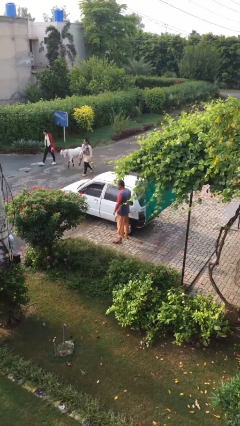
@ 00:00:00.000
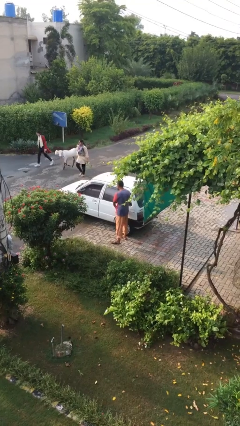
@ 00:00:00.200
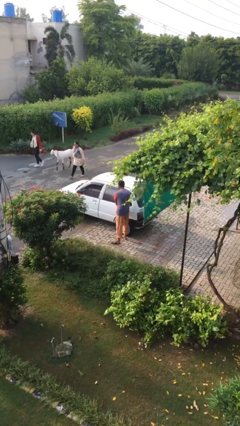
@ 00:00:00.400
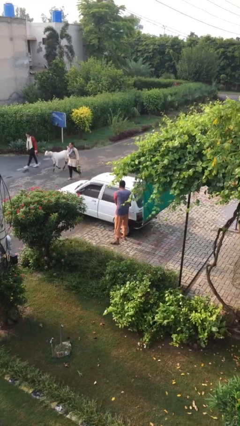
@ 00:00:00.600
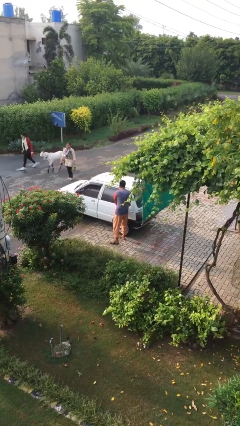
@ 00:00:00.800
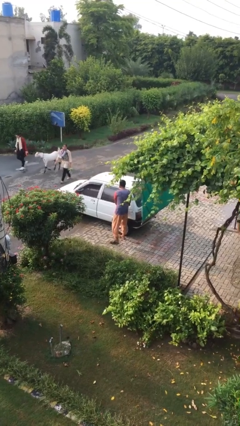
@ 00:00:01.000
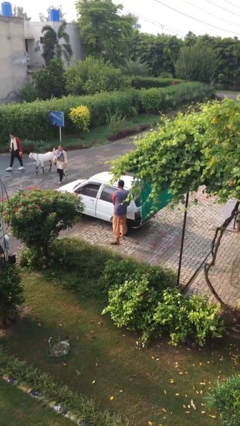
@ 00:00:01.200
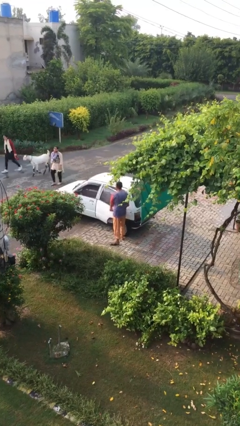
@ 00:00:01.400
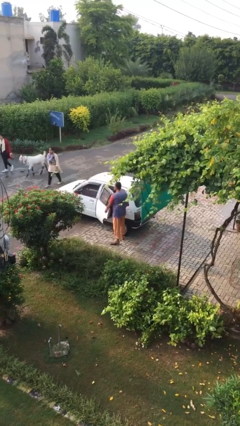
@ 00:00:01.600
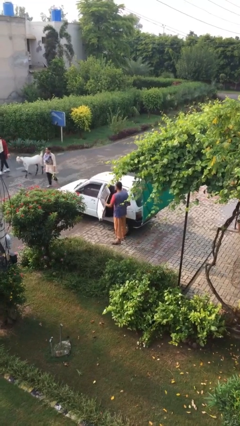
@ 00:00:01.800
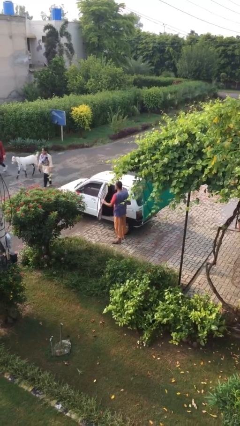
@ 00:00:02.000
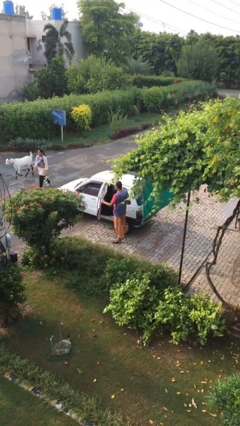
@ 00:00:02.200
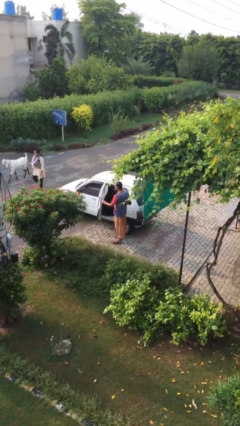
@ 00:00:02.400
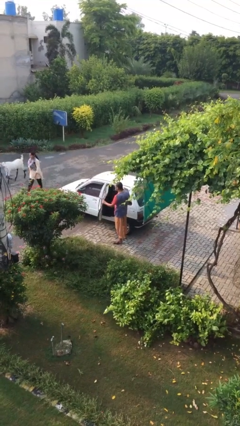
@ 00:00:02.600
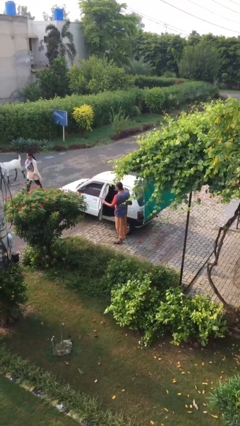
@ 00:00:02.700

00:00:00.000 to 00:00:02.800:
person opens car door

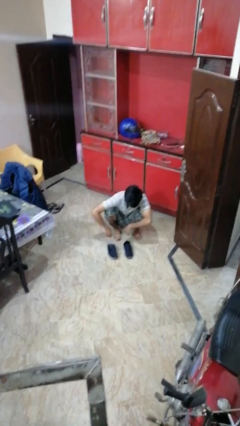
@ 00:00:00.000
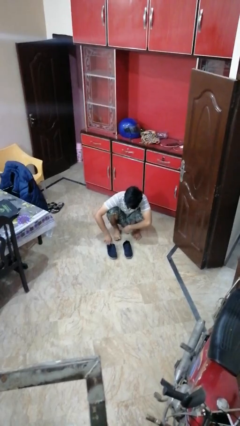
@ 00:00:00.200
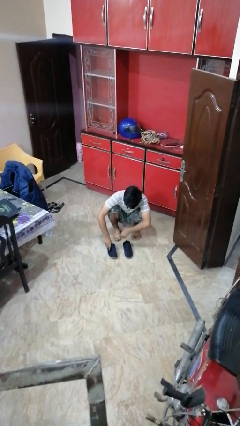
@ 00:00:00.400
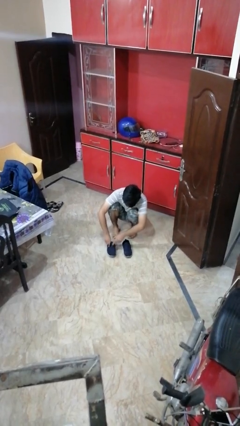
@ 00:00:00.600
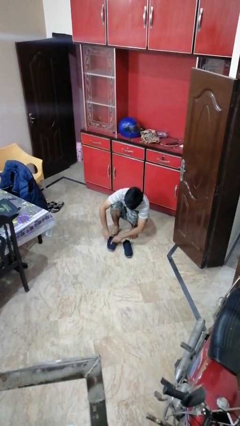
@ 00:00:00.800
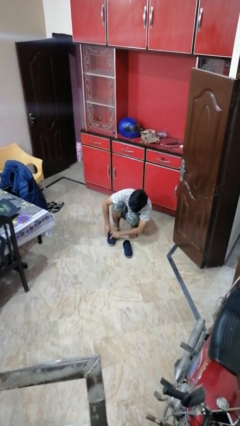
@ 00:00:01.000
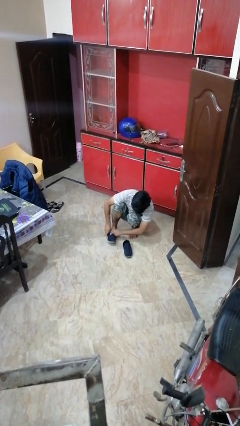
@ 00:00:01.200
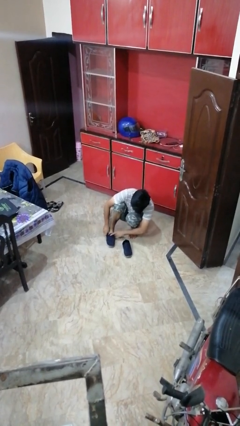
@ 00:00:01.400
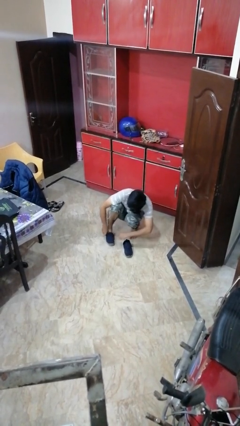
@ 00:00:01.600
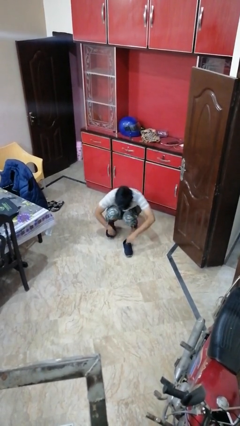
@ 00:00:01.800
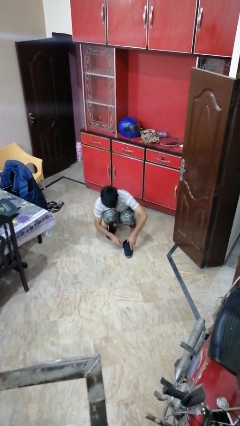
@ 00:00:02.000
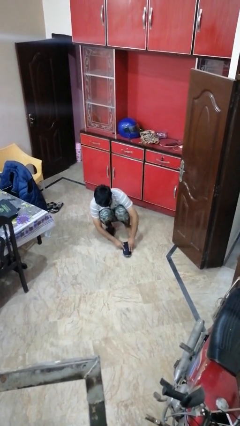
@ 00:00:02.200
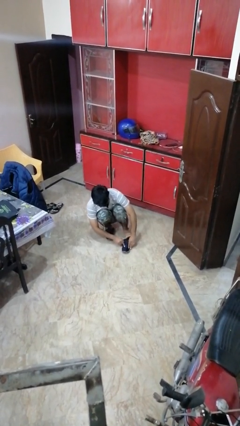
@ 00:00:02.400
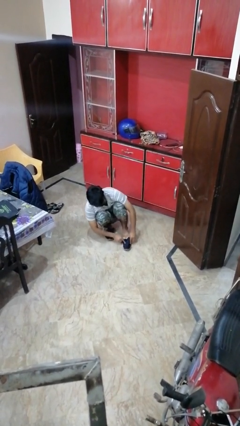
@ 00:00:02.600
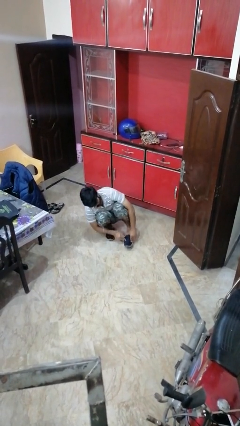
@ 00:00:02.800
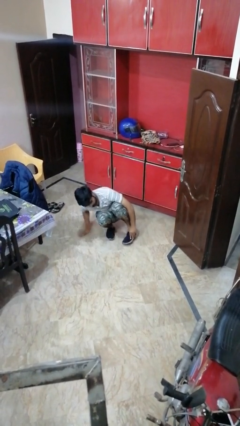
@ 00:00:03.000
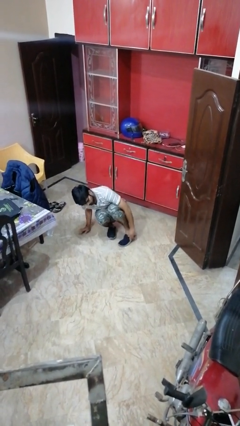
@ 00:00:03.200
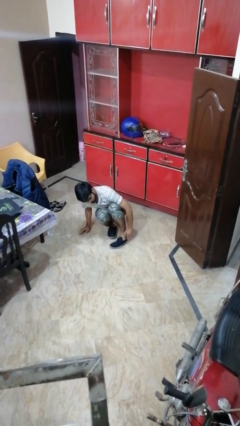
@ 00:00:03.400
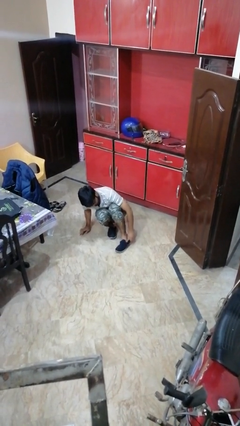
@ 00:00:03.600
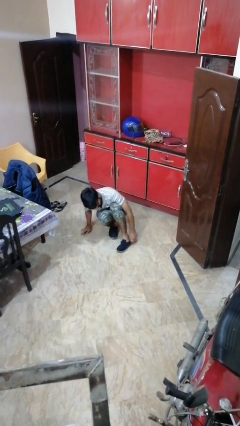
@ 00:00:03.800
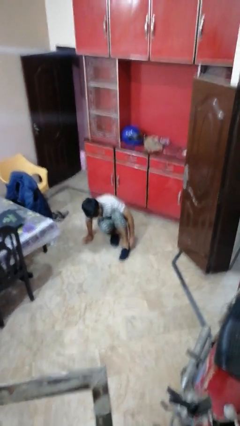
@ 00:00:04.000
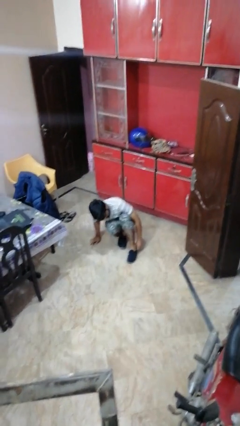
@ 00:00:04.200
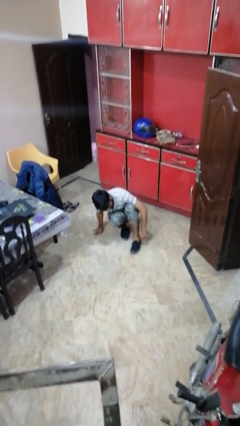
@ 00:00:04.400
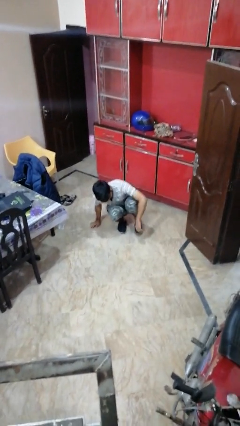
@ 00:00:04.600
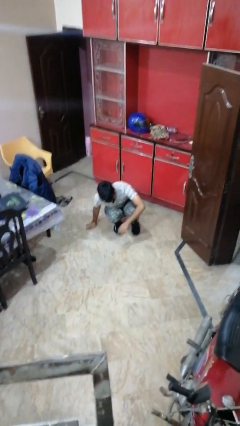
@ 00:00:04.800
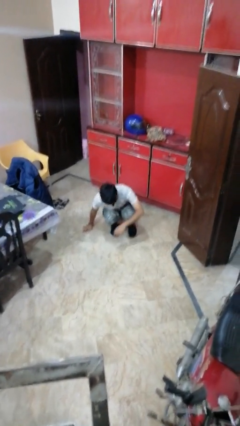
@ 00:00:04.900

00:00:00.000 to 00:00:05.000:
person puts on shoes

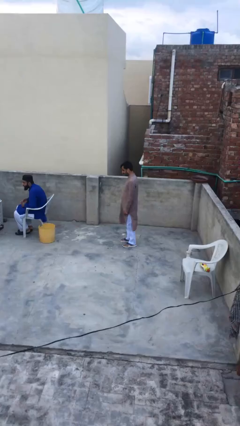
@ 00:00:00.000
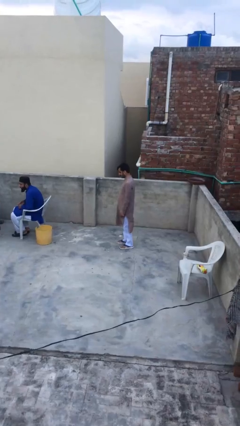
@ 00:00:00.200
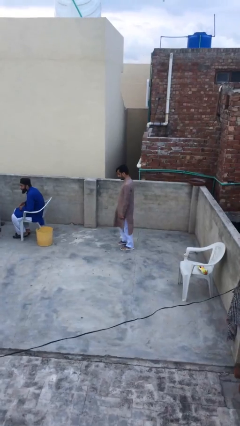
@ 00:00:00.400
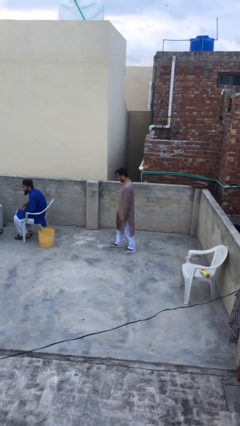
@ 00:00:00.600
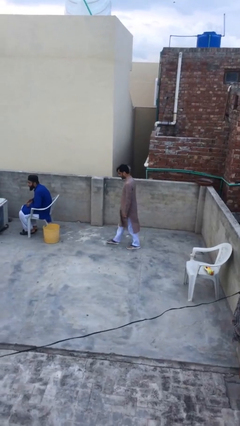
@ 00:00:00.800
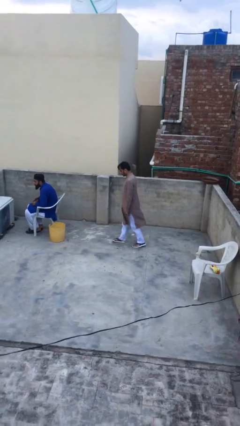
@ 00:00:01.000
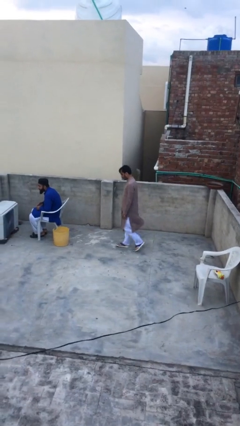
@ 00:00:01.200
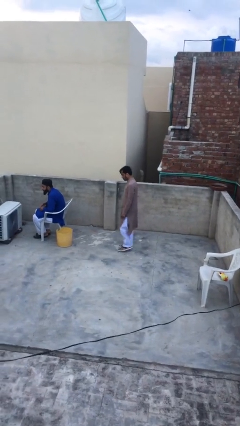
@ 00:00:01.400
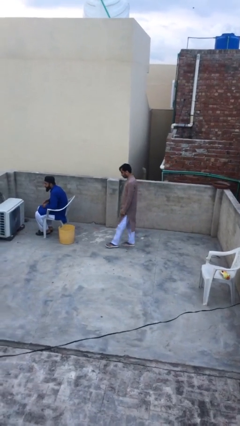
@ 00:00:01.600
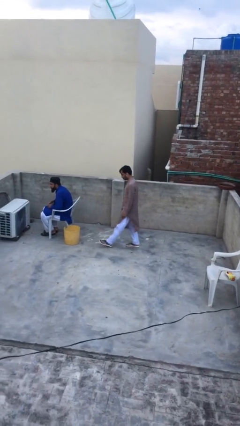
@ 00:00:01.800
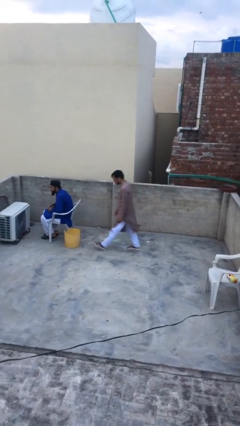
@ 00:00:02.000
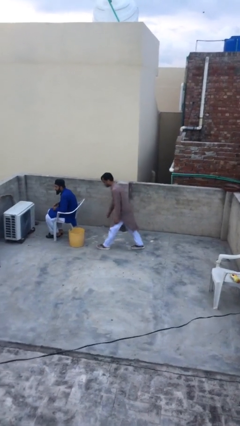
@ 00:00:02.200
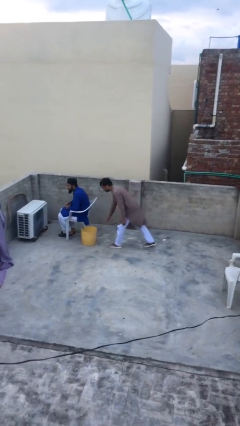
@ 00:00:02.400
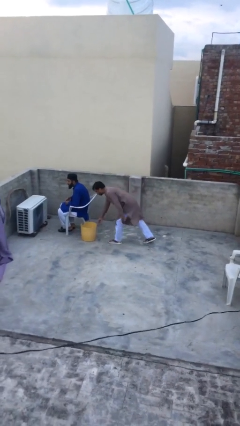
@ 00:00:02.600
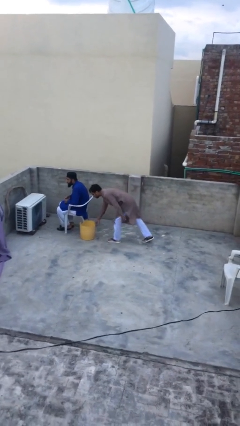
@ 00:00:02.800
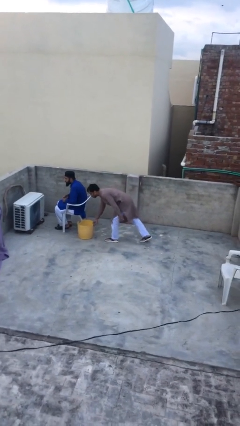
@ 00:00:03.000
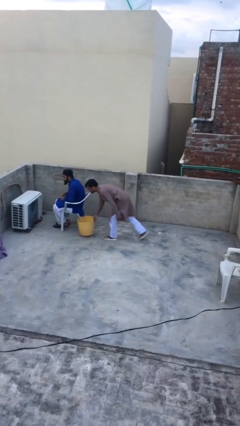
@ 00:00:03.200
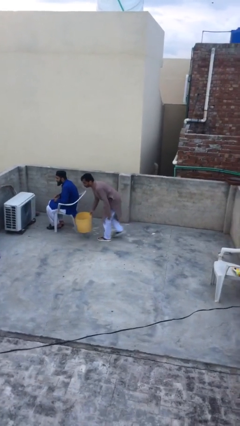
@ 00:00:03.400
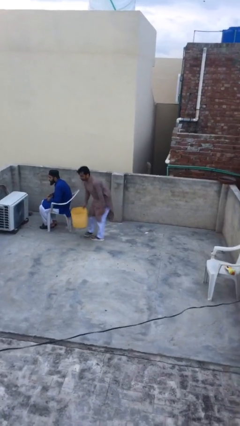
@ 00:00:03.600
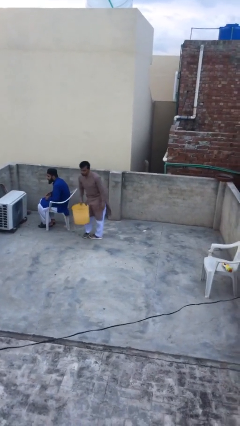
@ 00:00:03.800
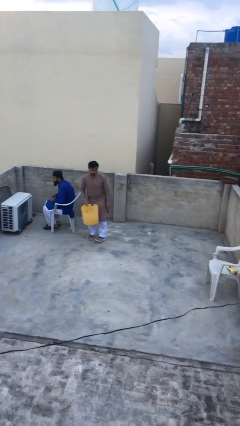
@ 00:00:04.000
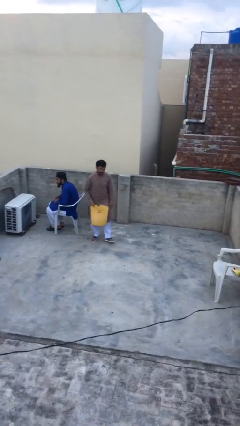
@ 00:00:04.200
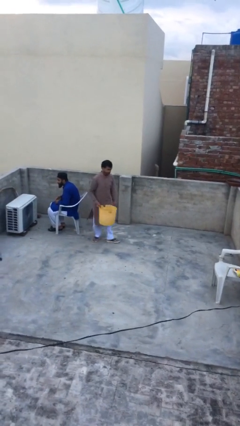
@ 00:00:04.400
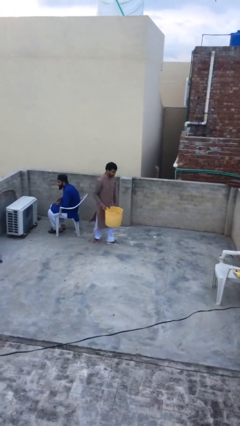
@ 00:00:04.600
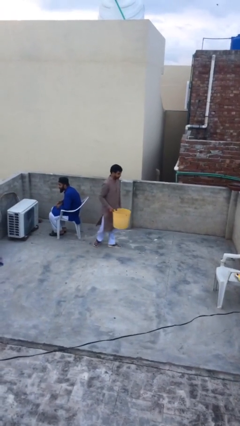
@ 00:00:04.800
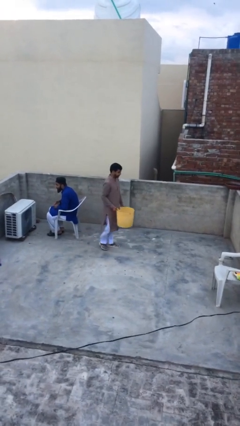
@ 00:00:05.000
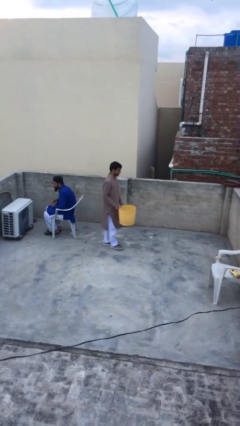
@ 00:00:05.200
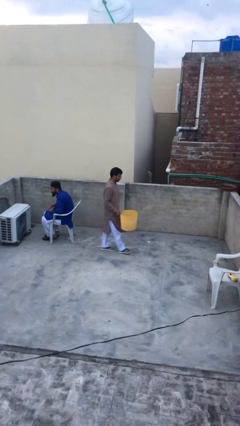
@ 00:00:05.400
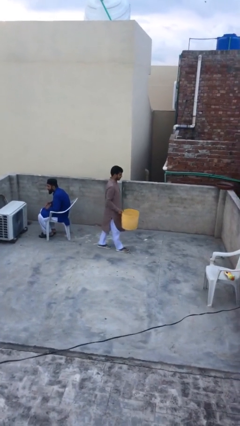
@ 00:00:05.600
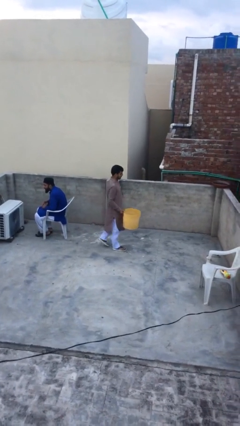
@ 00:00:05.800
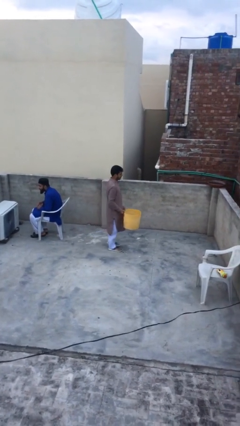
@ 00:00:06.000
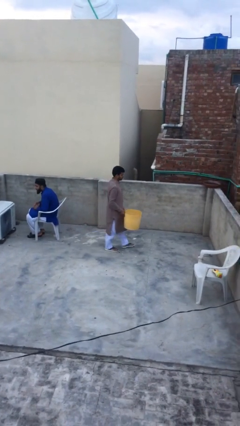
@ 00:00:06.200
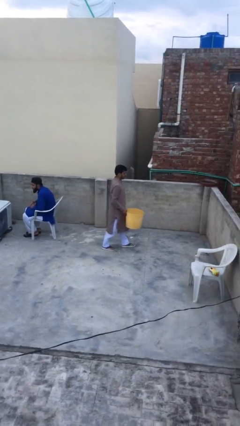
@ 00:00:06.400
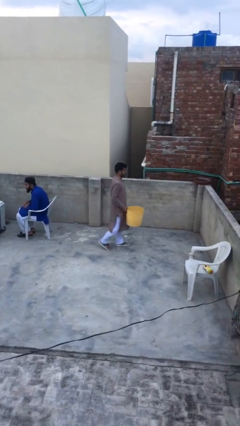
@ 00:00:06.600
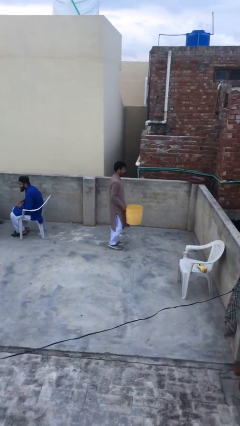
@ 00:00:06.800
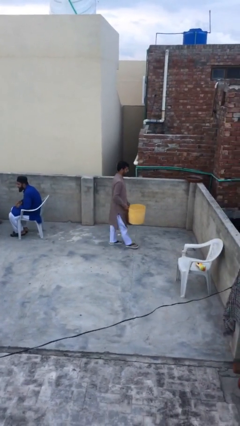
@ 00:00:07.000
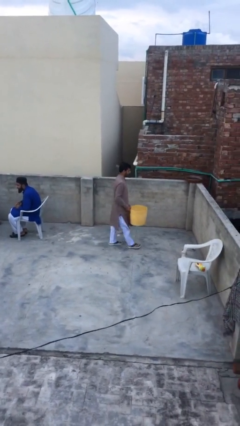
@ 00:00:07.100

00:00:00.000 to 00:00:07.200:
person steals object from person

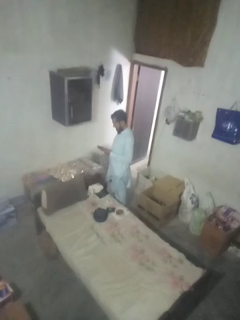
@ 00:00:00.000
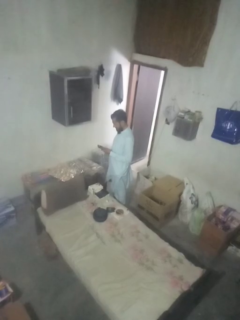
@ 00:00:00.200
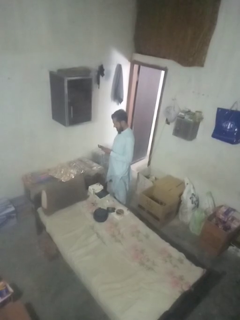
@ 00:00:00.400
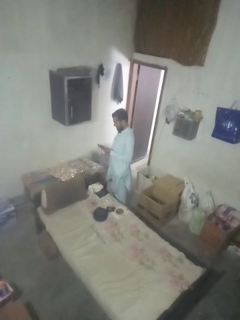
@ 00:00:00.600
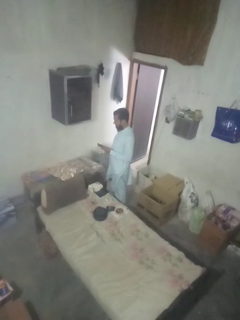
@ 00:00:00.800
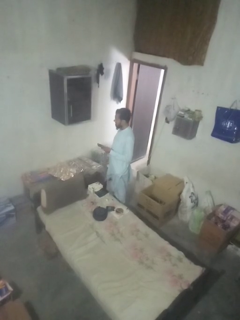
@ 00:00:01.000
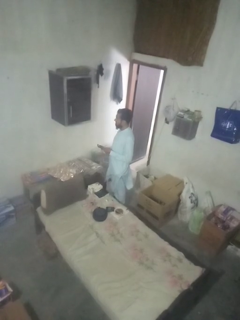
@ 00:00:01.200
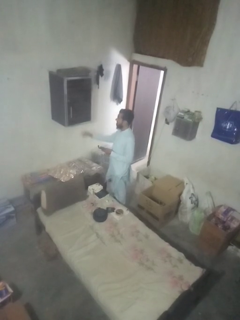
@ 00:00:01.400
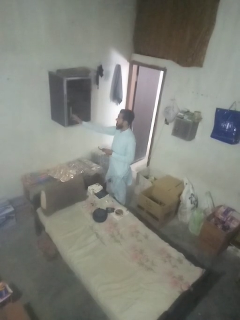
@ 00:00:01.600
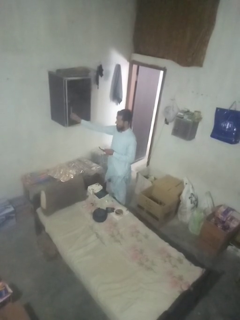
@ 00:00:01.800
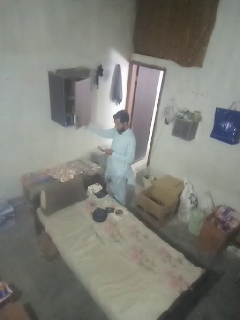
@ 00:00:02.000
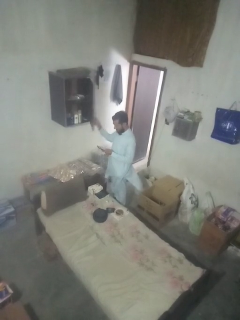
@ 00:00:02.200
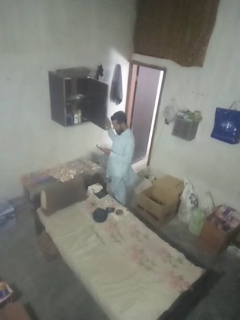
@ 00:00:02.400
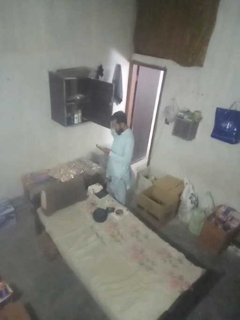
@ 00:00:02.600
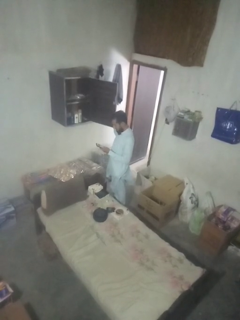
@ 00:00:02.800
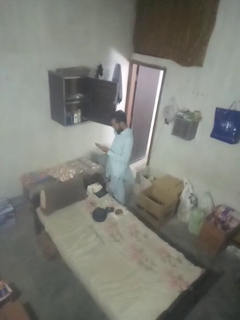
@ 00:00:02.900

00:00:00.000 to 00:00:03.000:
person opens dresser drawer
